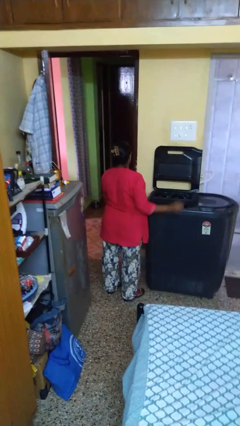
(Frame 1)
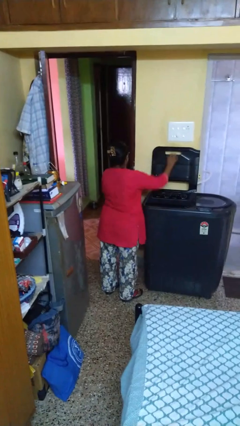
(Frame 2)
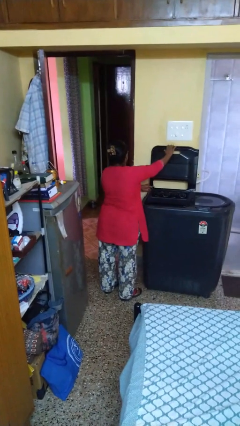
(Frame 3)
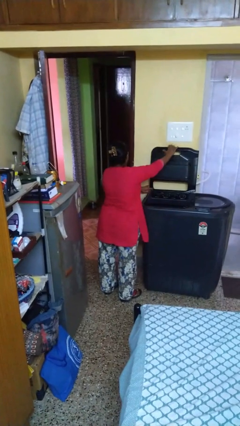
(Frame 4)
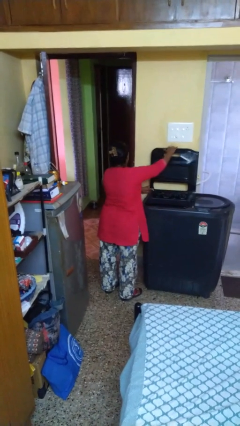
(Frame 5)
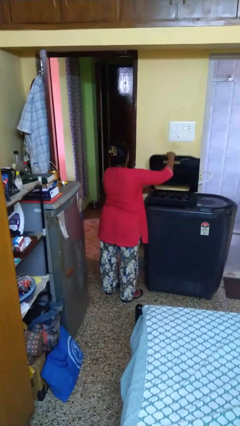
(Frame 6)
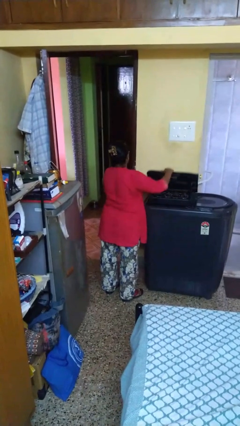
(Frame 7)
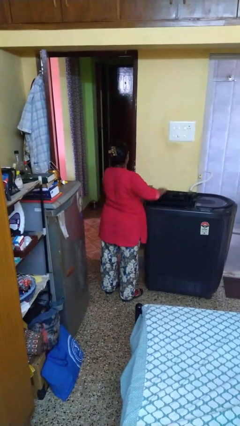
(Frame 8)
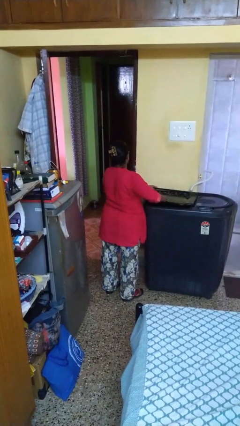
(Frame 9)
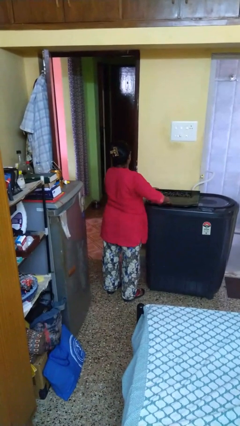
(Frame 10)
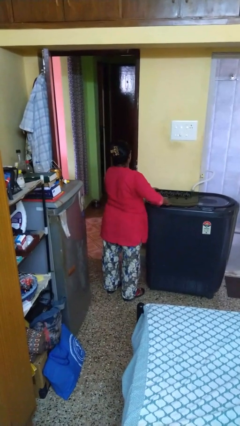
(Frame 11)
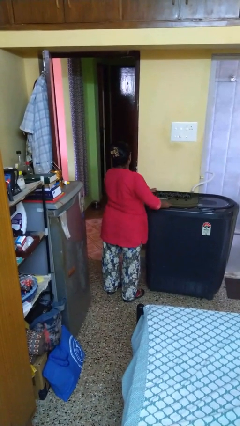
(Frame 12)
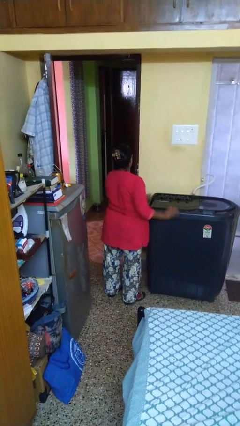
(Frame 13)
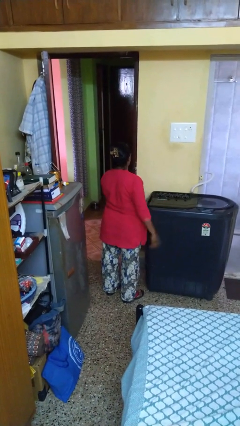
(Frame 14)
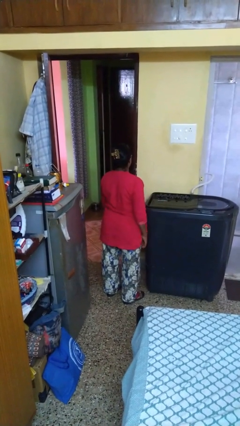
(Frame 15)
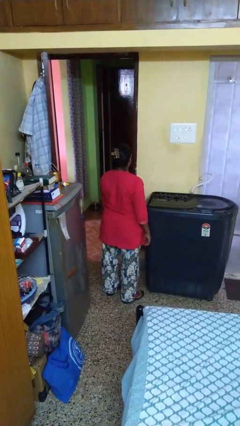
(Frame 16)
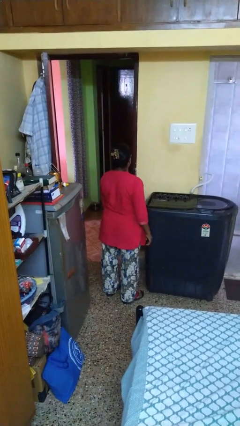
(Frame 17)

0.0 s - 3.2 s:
person closes clothes washer

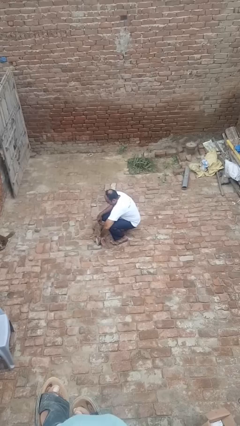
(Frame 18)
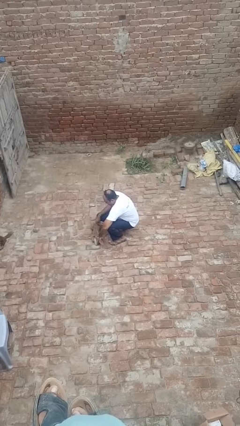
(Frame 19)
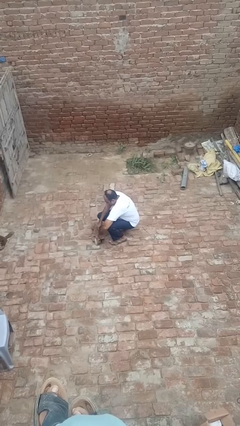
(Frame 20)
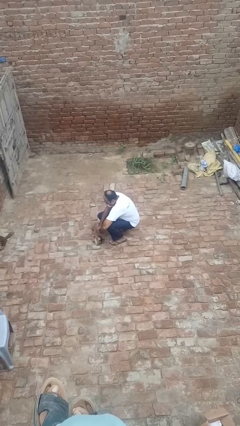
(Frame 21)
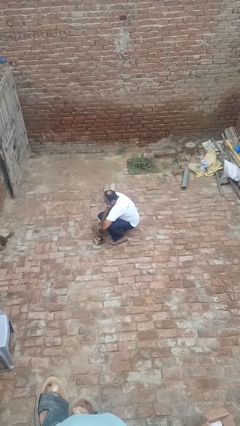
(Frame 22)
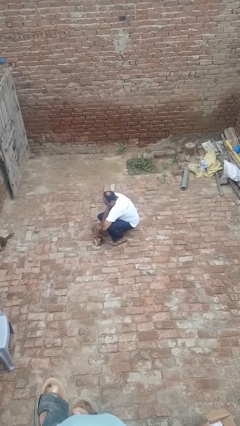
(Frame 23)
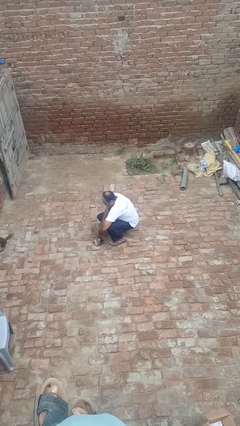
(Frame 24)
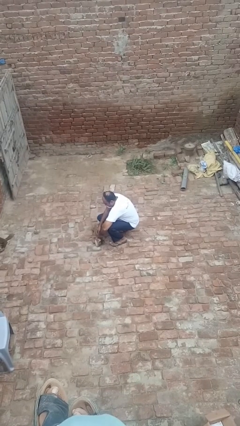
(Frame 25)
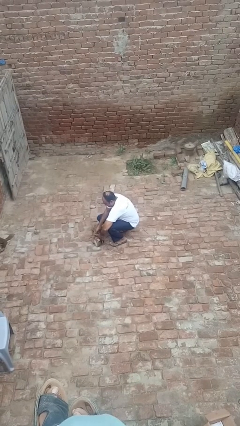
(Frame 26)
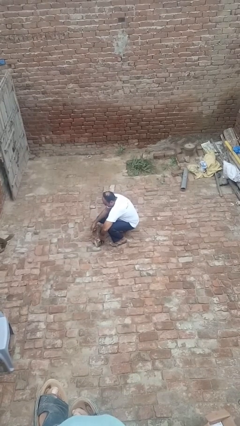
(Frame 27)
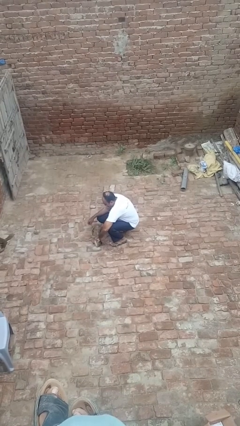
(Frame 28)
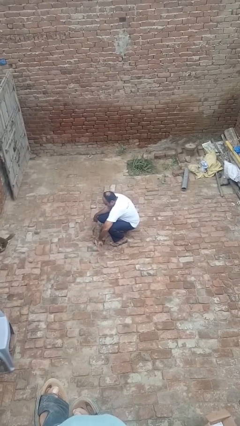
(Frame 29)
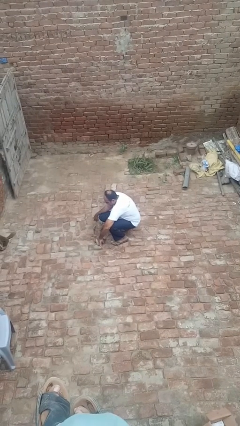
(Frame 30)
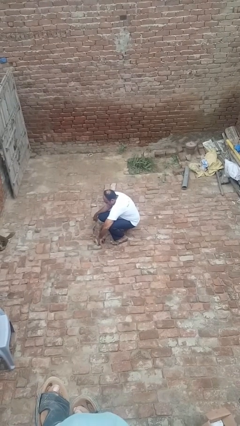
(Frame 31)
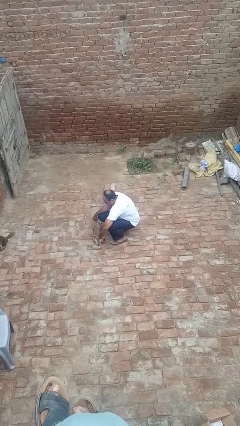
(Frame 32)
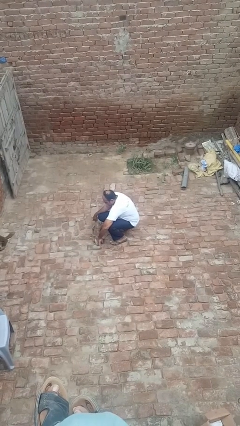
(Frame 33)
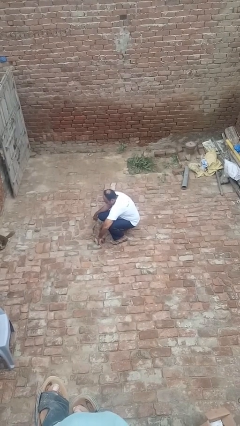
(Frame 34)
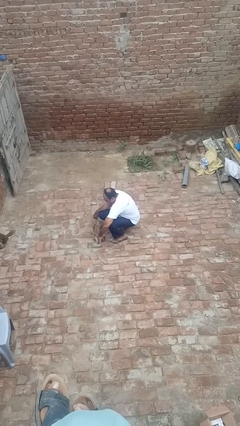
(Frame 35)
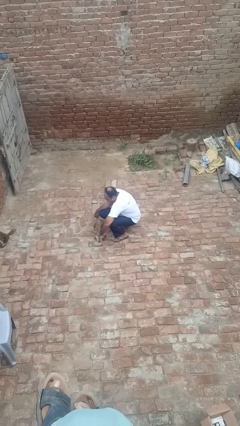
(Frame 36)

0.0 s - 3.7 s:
person unattaches leash from dog

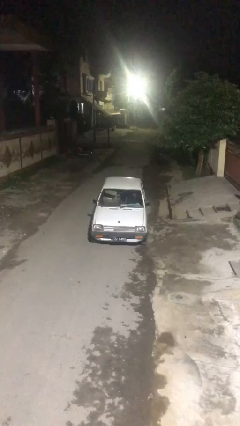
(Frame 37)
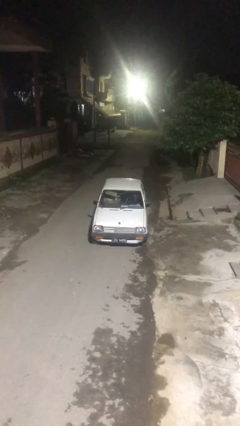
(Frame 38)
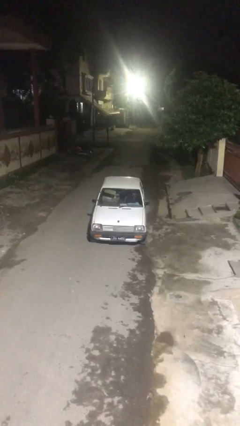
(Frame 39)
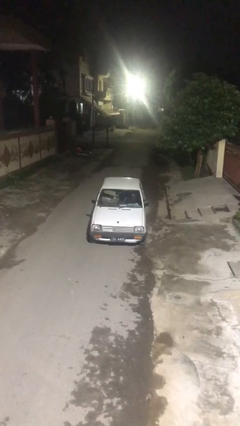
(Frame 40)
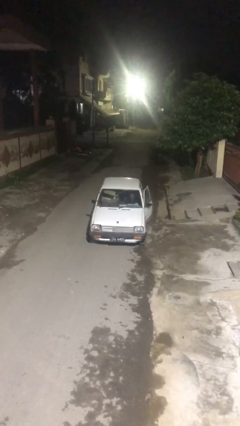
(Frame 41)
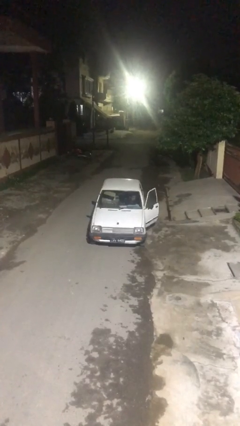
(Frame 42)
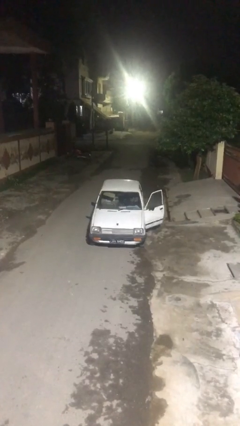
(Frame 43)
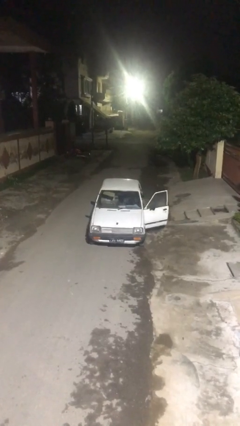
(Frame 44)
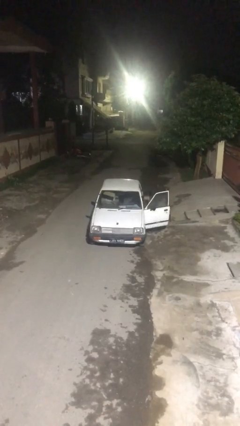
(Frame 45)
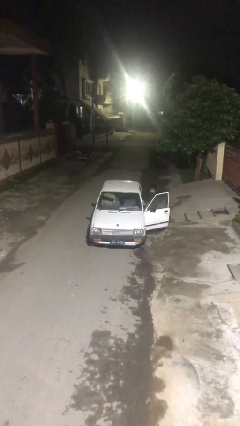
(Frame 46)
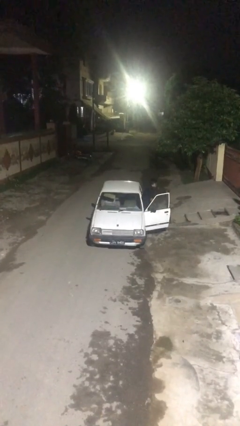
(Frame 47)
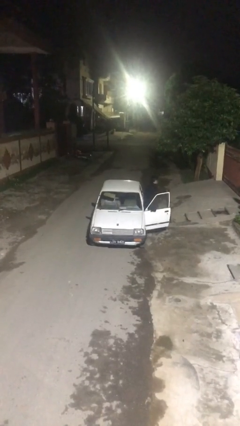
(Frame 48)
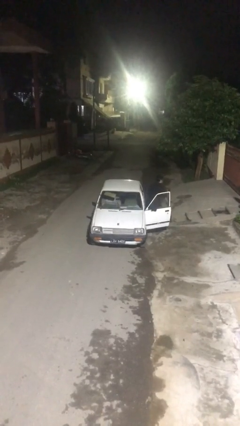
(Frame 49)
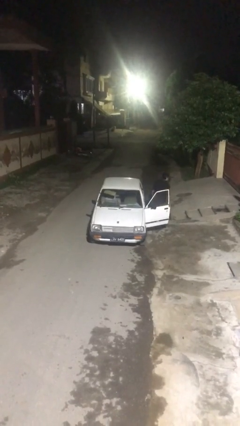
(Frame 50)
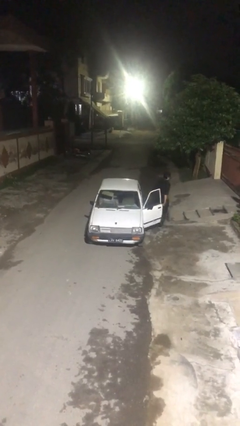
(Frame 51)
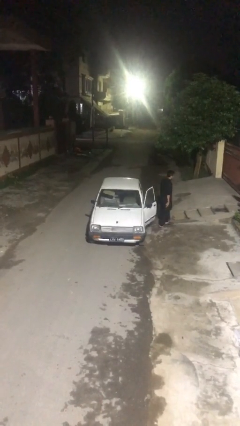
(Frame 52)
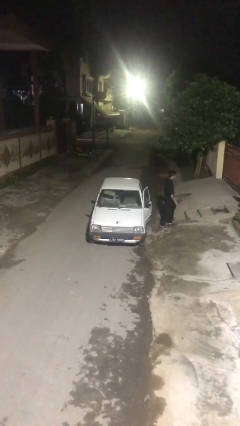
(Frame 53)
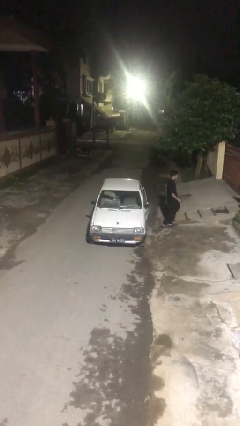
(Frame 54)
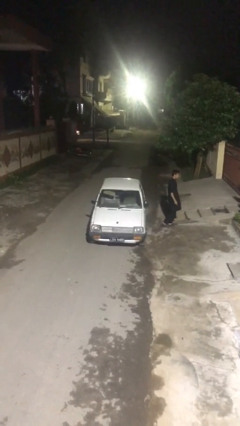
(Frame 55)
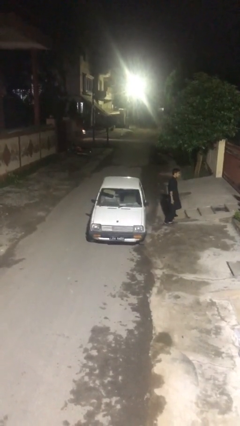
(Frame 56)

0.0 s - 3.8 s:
car drops off person

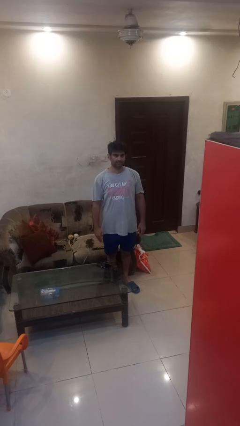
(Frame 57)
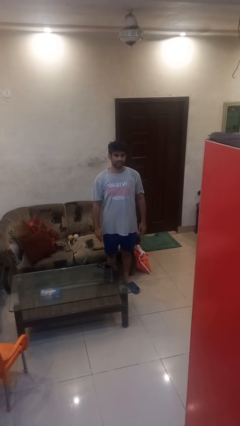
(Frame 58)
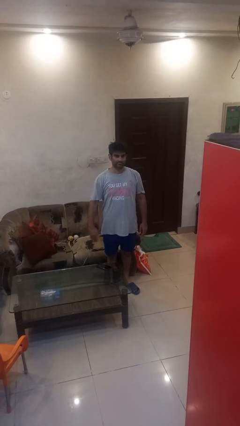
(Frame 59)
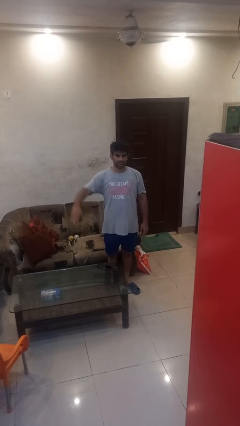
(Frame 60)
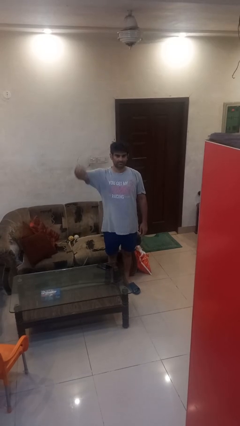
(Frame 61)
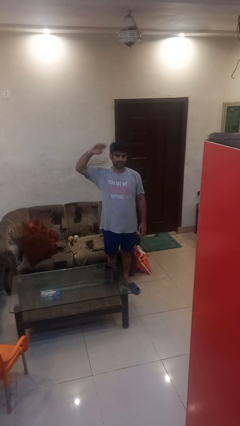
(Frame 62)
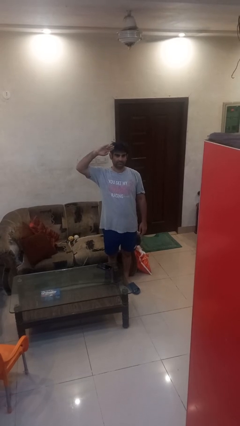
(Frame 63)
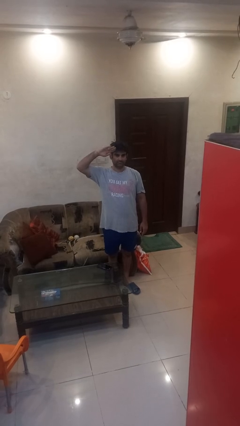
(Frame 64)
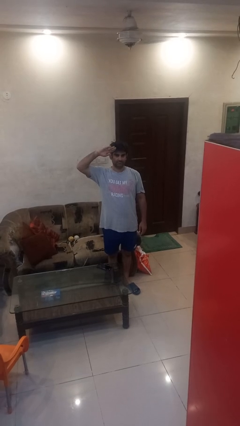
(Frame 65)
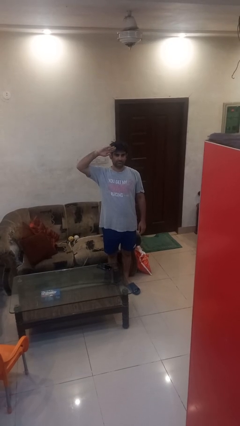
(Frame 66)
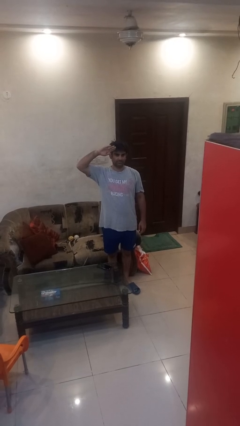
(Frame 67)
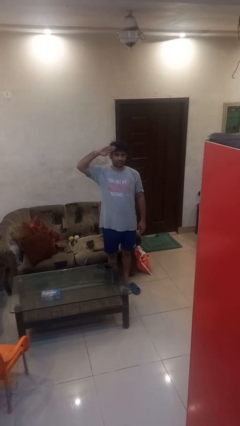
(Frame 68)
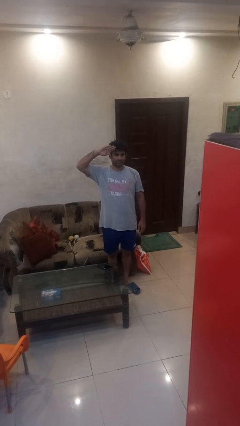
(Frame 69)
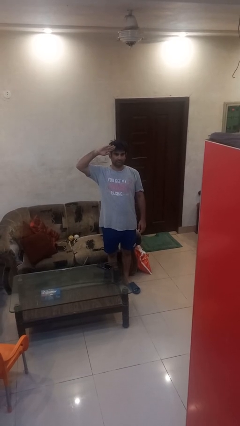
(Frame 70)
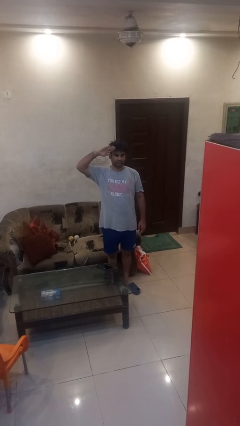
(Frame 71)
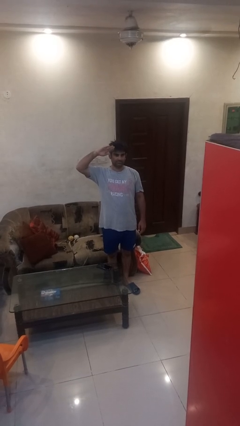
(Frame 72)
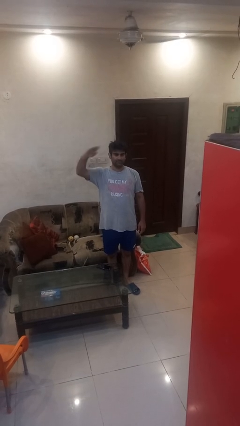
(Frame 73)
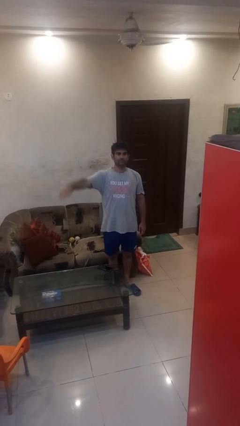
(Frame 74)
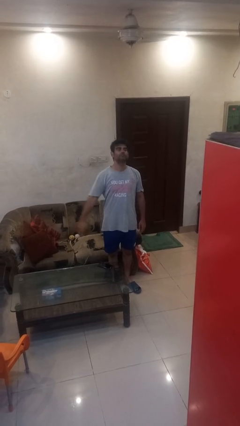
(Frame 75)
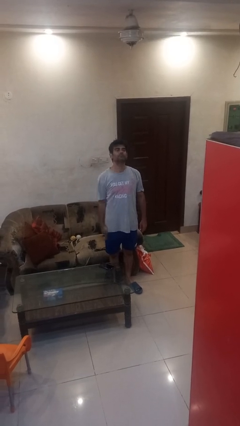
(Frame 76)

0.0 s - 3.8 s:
person salutes

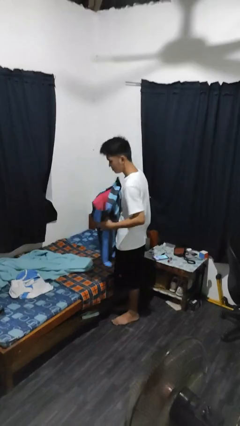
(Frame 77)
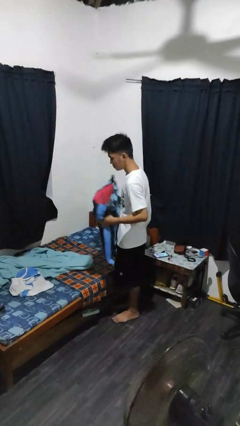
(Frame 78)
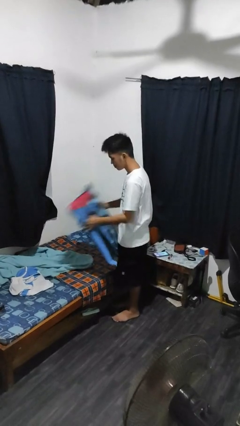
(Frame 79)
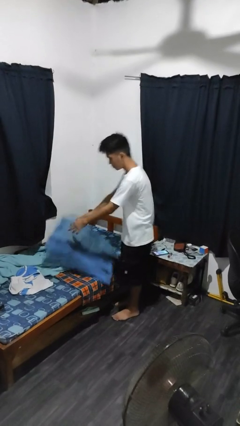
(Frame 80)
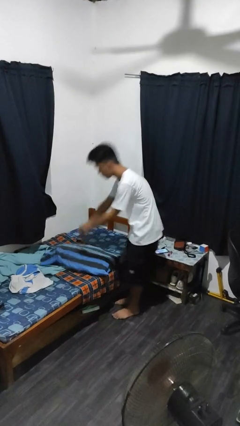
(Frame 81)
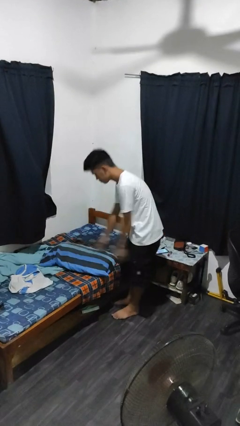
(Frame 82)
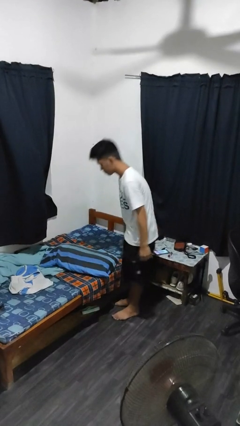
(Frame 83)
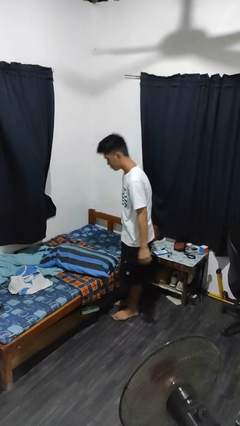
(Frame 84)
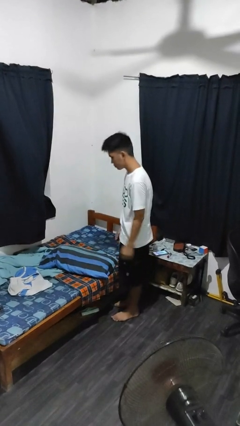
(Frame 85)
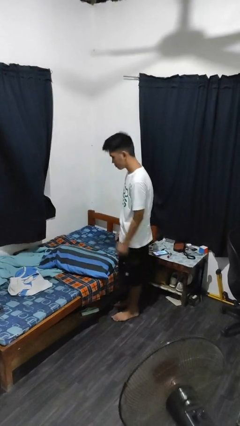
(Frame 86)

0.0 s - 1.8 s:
person puts down object on bed

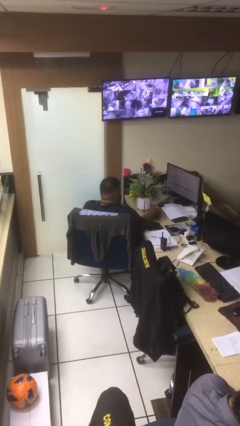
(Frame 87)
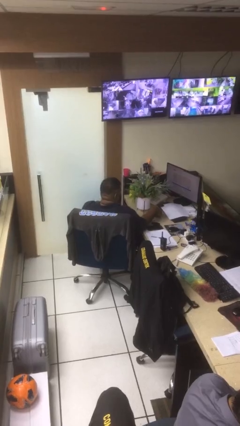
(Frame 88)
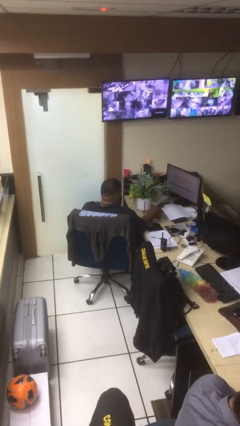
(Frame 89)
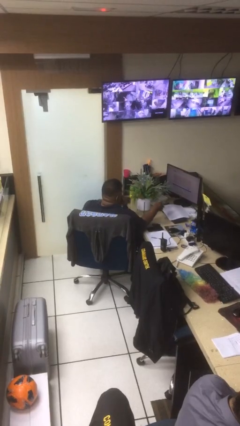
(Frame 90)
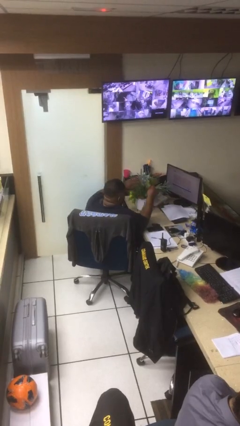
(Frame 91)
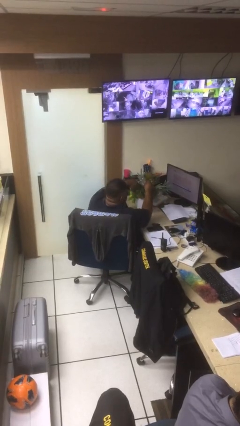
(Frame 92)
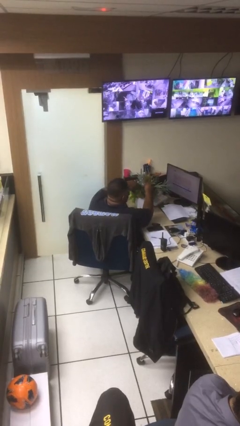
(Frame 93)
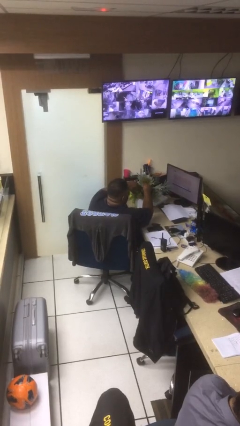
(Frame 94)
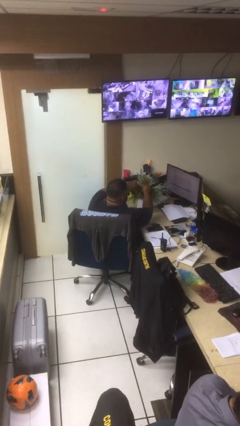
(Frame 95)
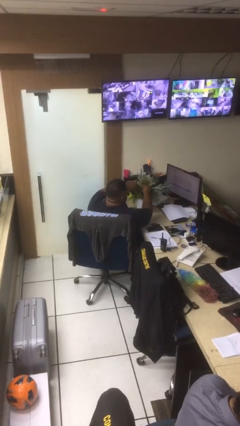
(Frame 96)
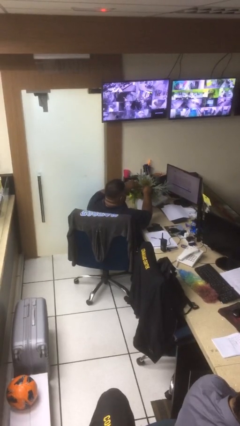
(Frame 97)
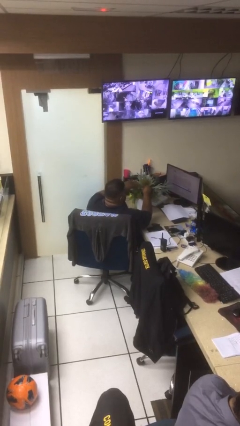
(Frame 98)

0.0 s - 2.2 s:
person arranges flowers in vase
